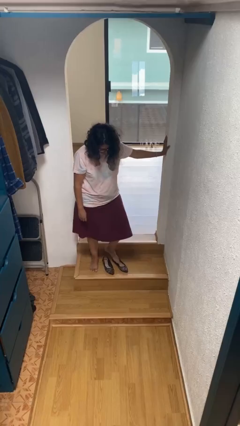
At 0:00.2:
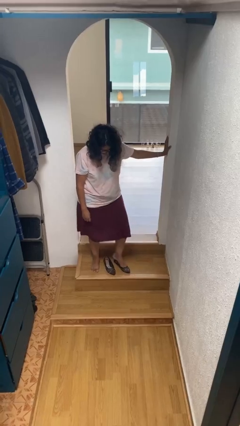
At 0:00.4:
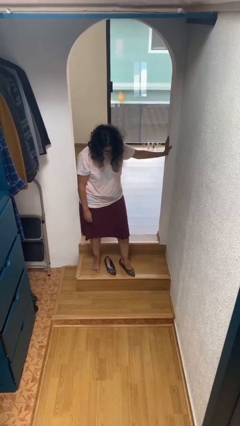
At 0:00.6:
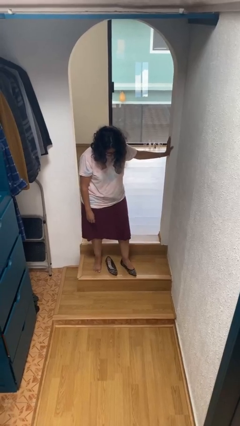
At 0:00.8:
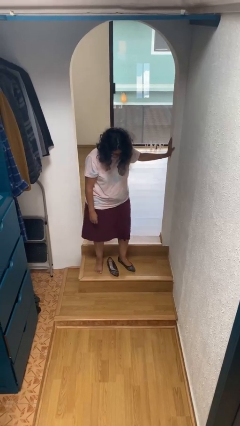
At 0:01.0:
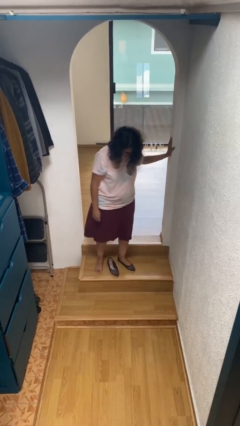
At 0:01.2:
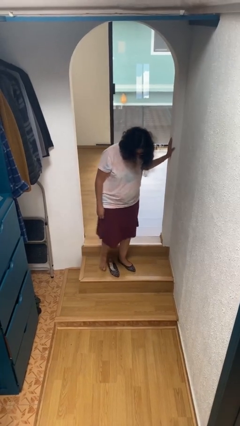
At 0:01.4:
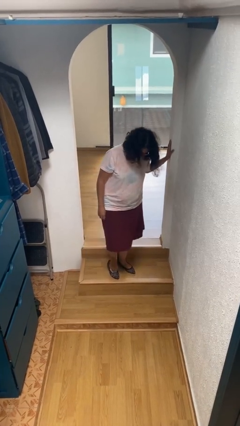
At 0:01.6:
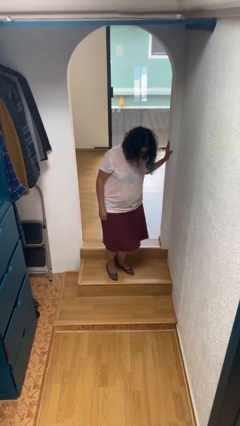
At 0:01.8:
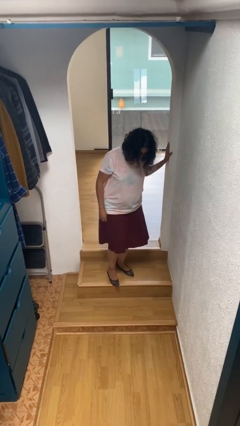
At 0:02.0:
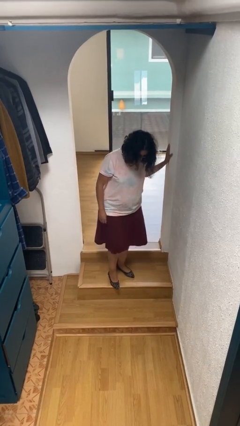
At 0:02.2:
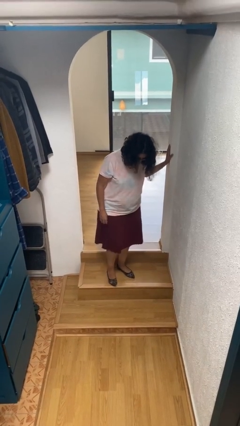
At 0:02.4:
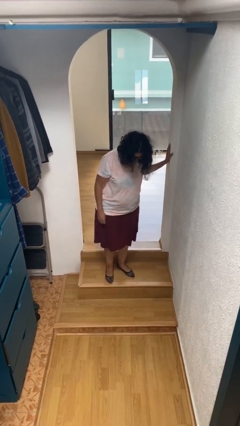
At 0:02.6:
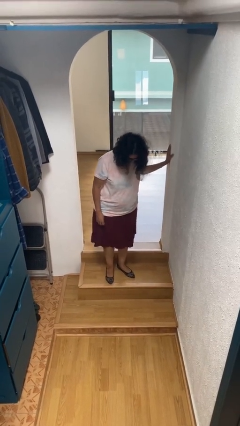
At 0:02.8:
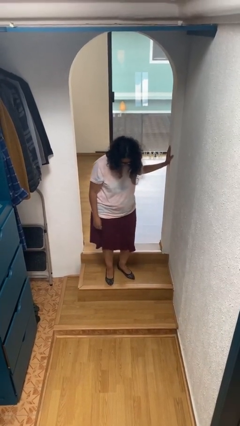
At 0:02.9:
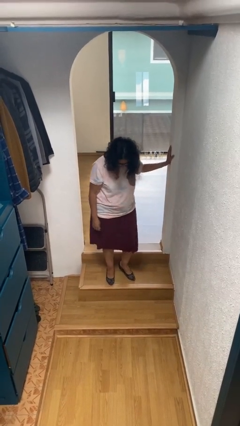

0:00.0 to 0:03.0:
person puts on shoes

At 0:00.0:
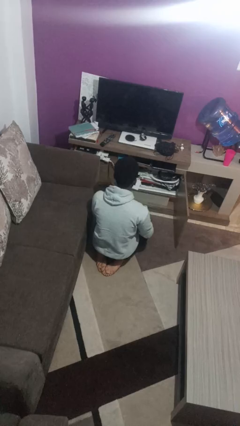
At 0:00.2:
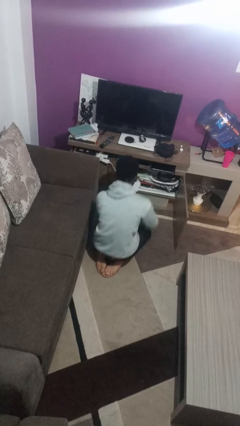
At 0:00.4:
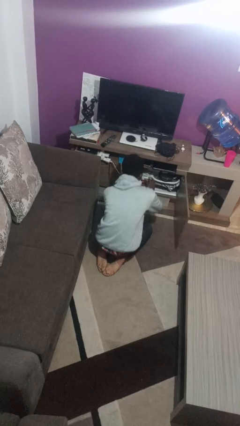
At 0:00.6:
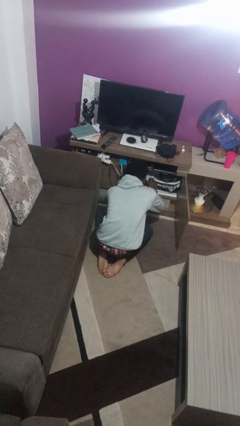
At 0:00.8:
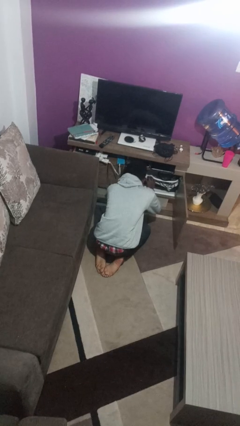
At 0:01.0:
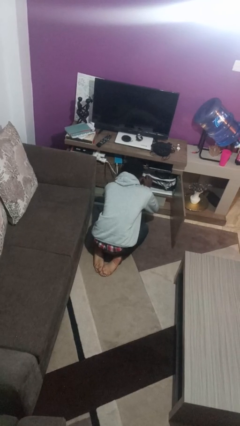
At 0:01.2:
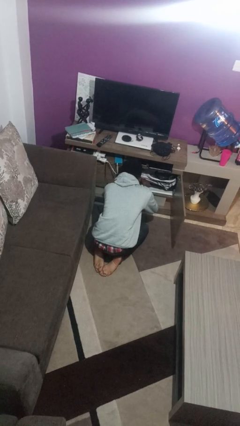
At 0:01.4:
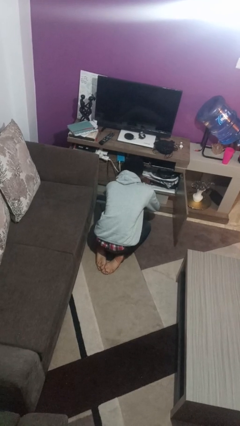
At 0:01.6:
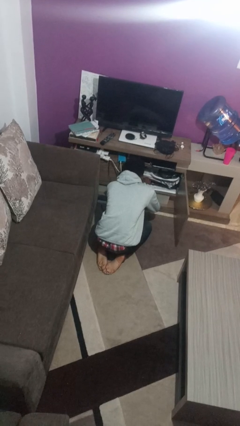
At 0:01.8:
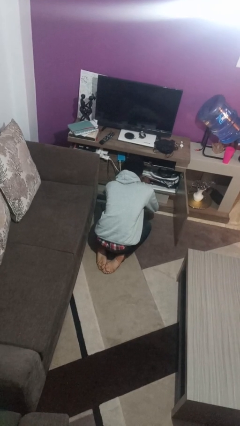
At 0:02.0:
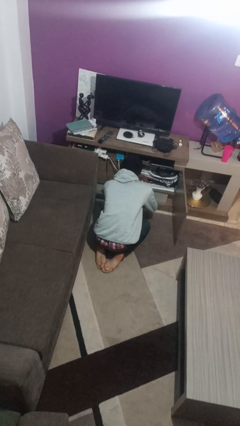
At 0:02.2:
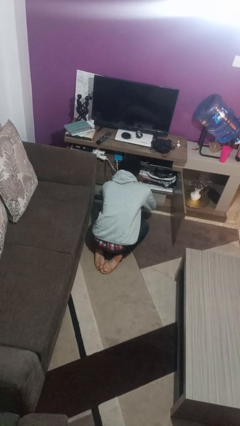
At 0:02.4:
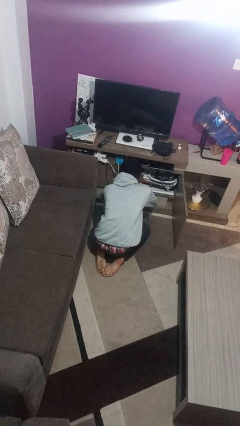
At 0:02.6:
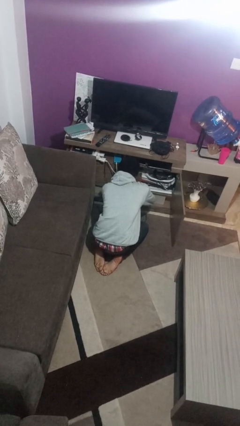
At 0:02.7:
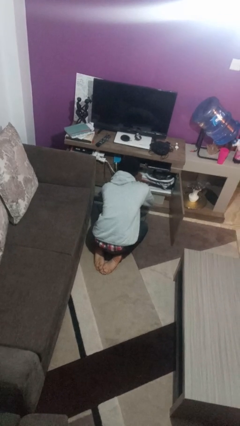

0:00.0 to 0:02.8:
person searches in cabinet

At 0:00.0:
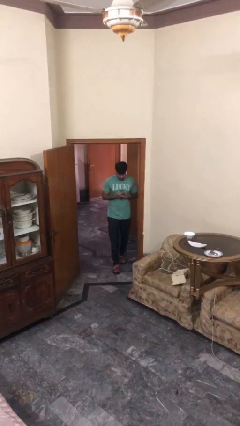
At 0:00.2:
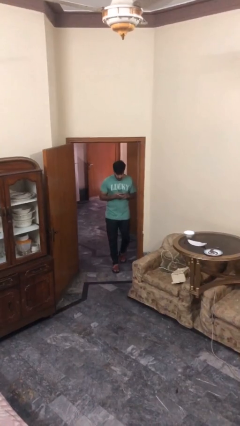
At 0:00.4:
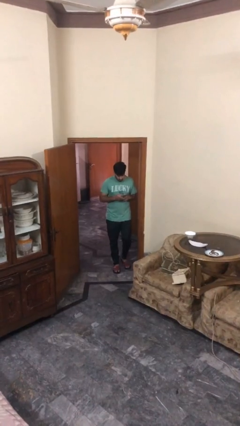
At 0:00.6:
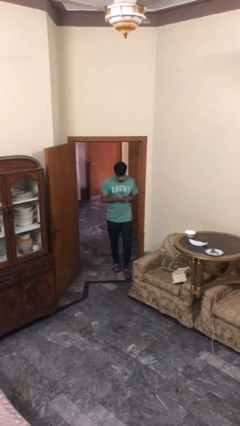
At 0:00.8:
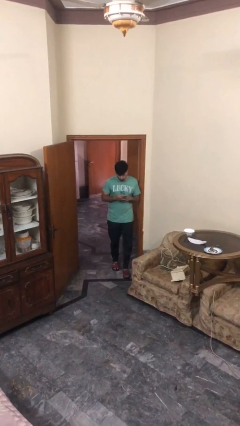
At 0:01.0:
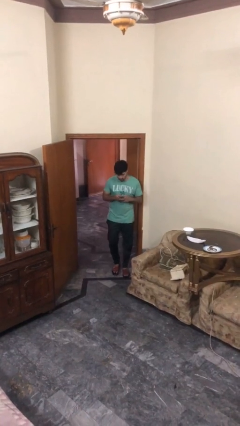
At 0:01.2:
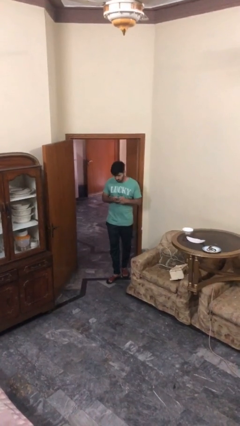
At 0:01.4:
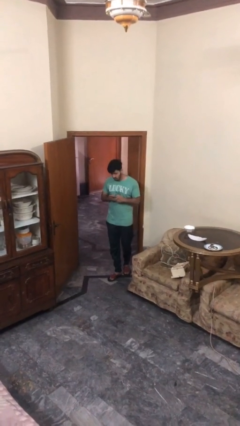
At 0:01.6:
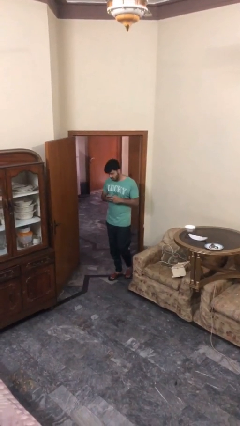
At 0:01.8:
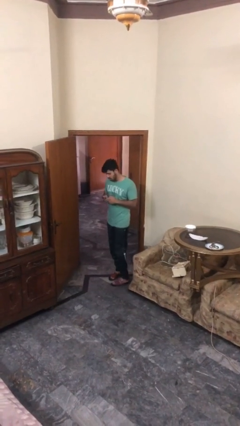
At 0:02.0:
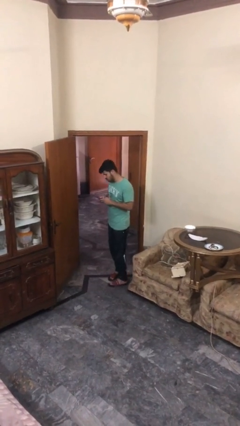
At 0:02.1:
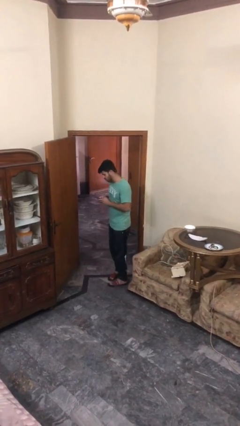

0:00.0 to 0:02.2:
person enters scene through structure

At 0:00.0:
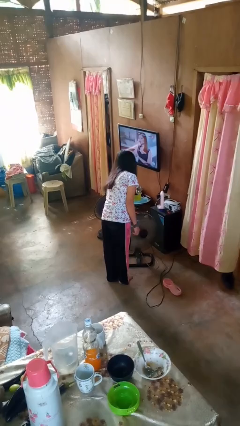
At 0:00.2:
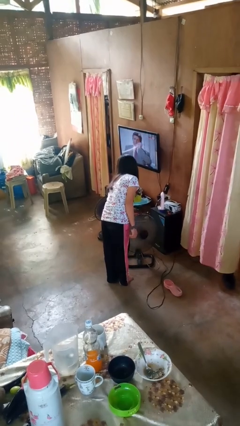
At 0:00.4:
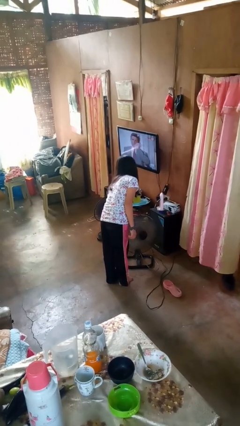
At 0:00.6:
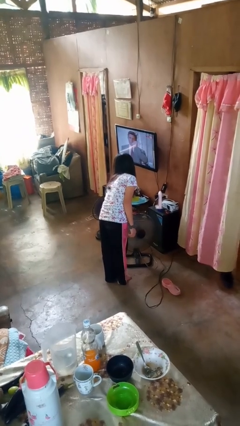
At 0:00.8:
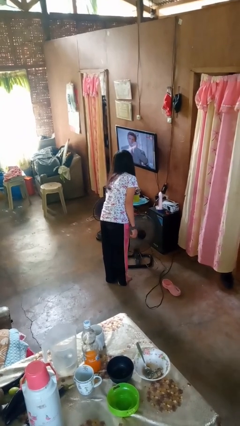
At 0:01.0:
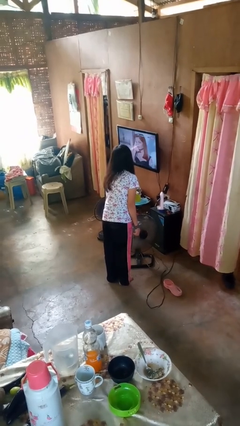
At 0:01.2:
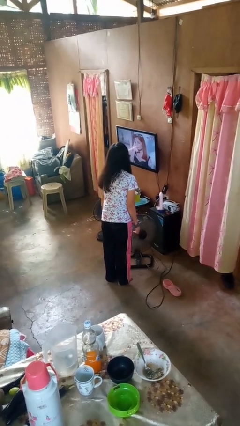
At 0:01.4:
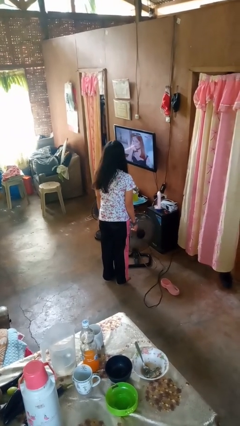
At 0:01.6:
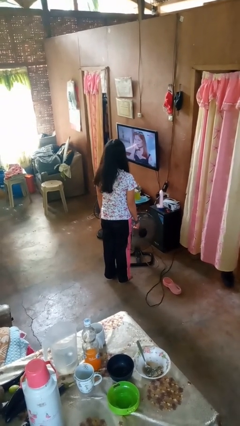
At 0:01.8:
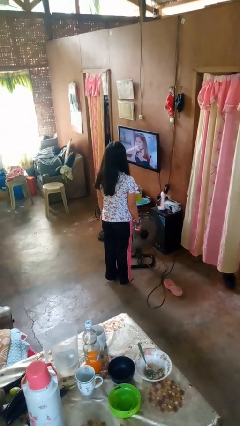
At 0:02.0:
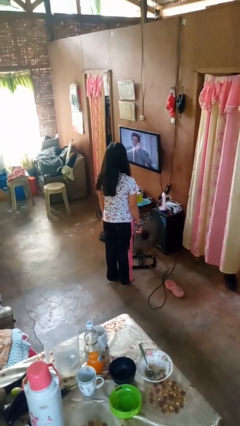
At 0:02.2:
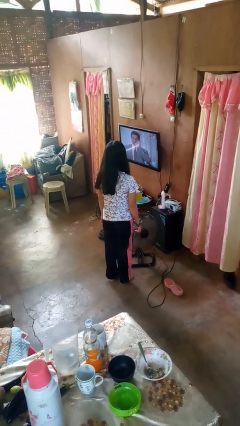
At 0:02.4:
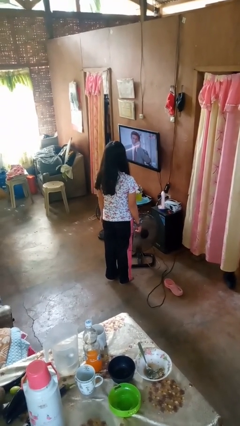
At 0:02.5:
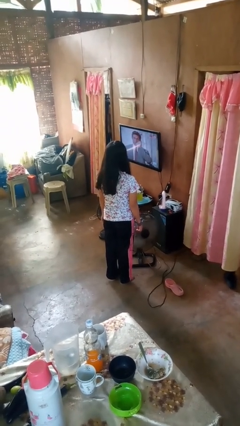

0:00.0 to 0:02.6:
person turns off fan

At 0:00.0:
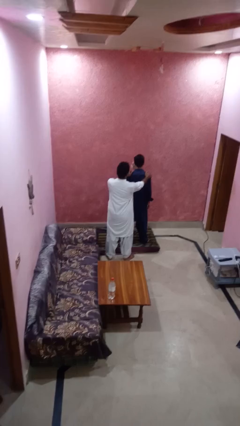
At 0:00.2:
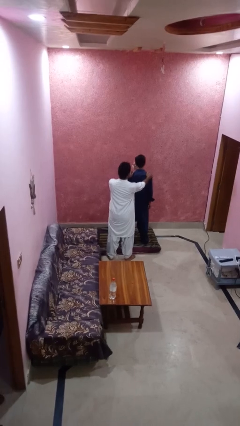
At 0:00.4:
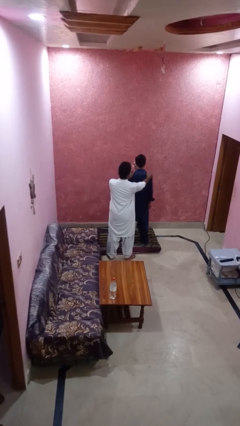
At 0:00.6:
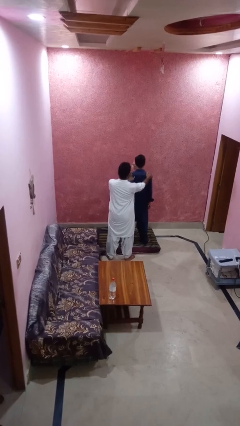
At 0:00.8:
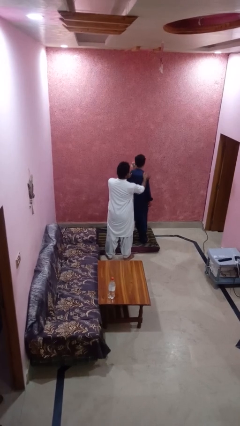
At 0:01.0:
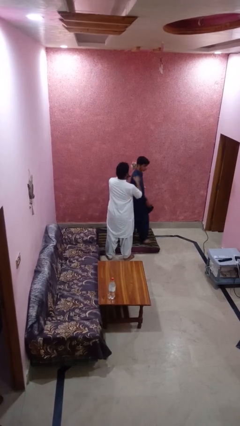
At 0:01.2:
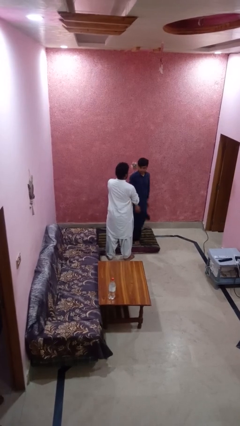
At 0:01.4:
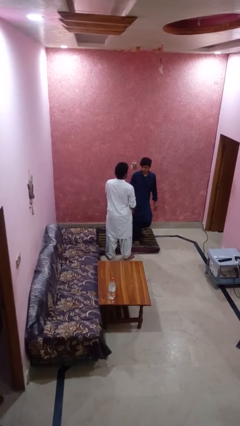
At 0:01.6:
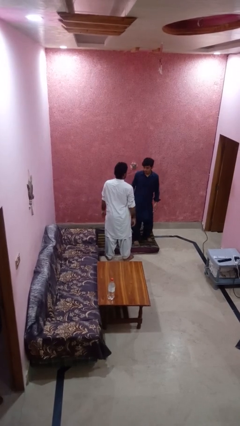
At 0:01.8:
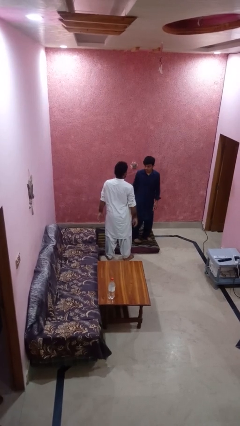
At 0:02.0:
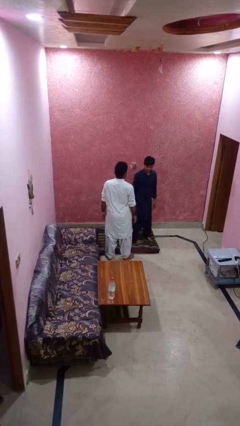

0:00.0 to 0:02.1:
person spins person around

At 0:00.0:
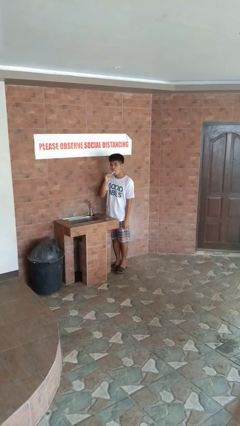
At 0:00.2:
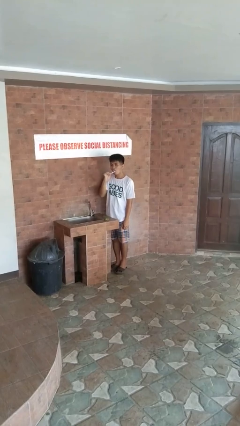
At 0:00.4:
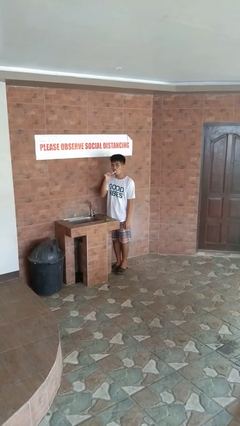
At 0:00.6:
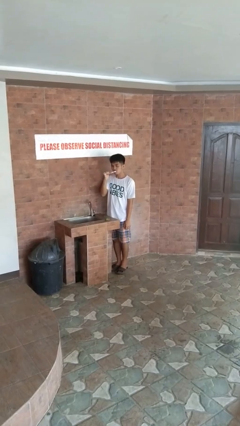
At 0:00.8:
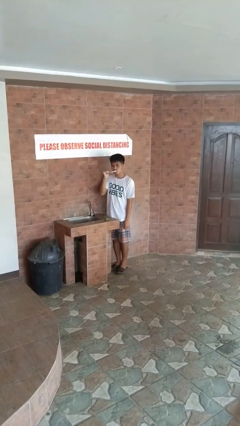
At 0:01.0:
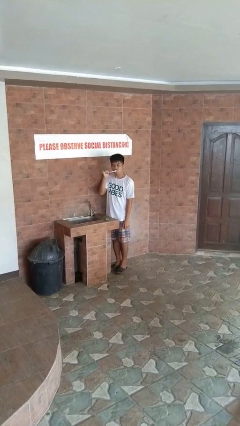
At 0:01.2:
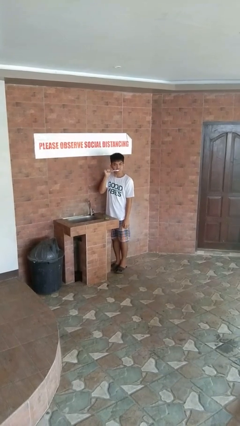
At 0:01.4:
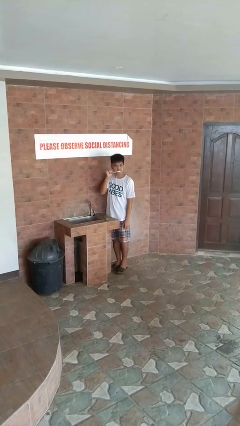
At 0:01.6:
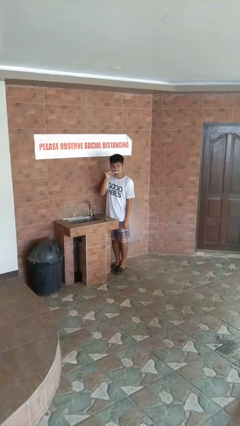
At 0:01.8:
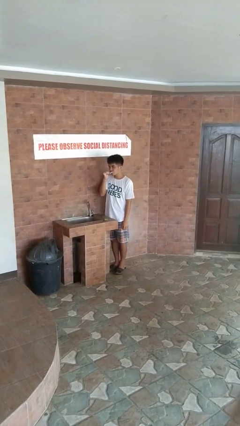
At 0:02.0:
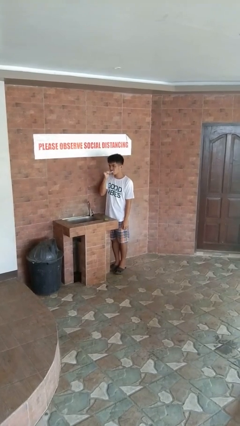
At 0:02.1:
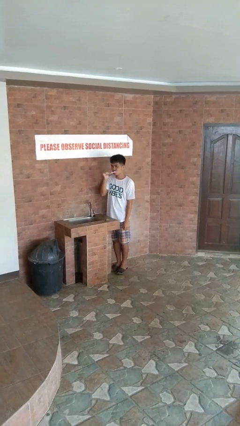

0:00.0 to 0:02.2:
person brushes teeth

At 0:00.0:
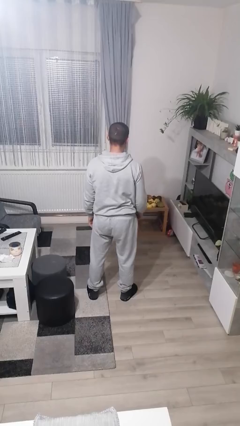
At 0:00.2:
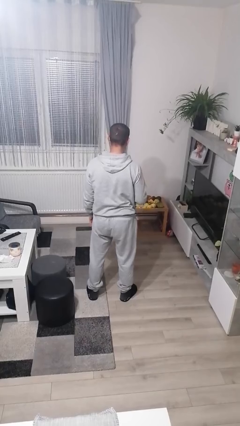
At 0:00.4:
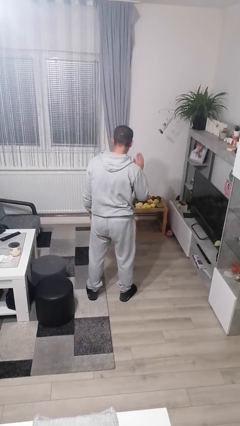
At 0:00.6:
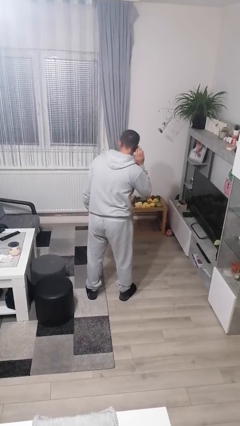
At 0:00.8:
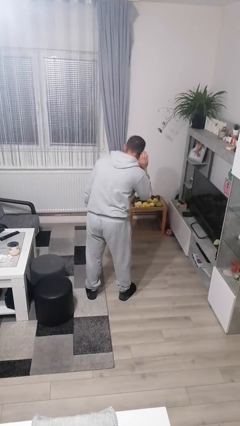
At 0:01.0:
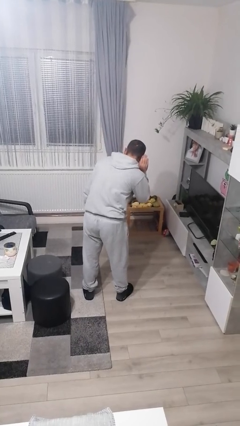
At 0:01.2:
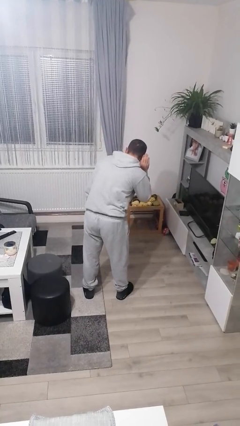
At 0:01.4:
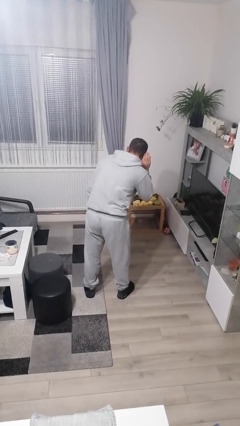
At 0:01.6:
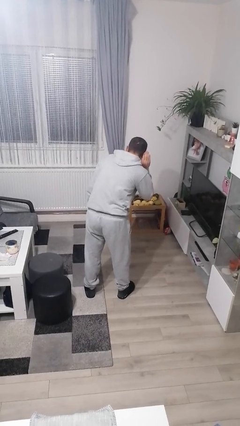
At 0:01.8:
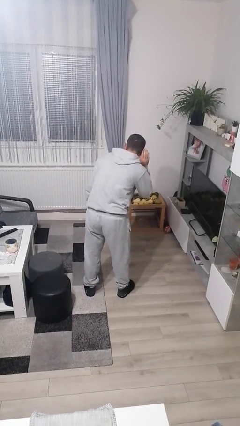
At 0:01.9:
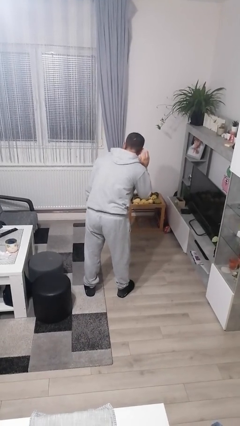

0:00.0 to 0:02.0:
person gestures listen closely

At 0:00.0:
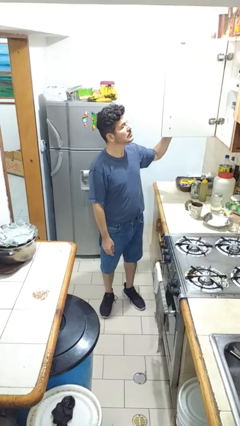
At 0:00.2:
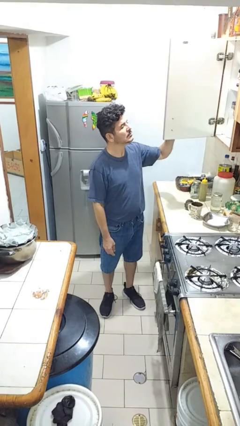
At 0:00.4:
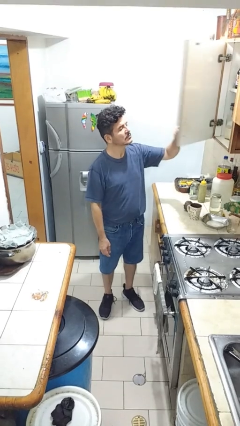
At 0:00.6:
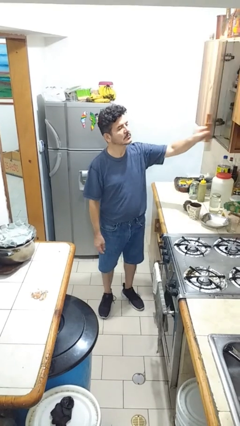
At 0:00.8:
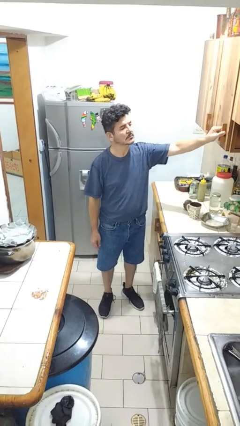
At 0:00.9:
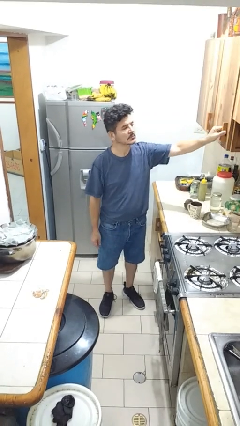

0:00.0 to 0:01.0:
person closes cabinet
